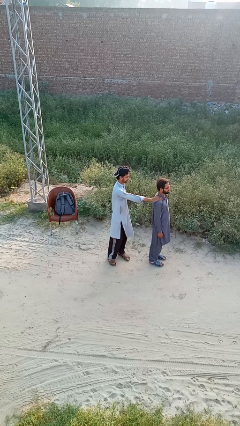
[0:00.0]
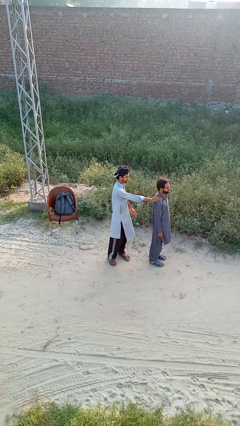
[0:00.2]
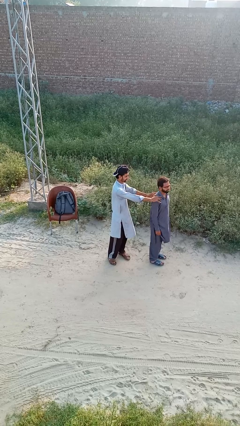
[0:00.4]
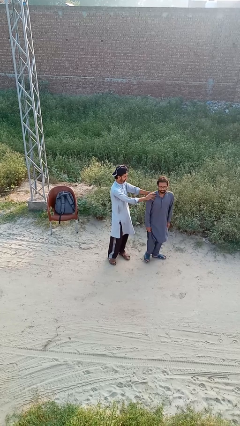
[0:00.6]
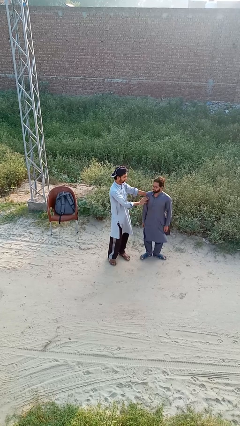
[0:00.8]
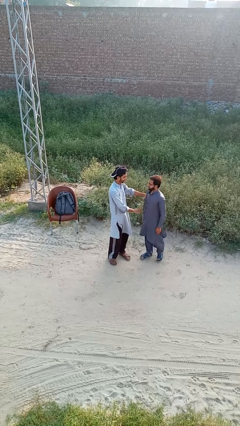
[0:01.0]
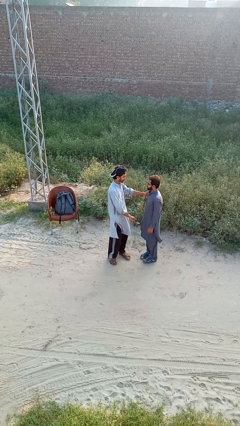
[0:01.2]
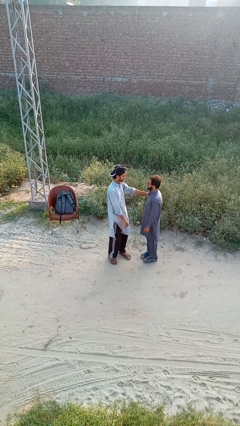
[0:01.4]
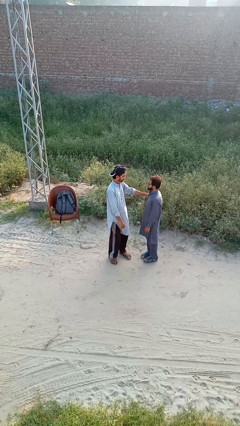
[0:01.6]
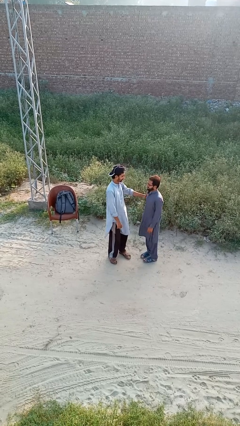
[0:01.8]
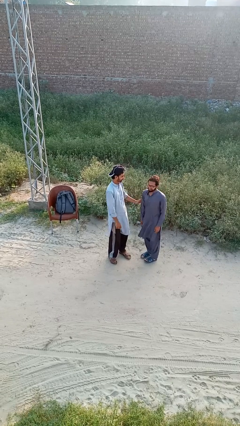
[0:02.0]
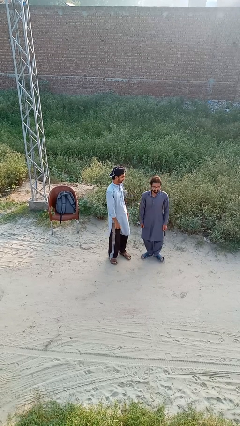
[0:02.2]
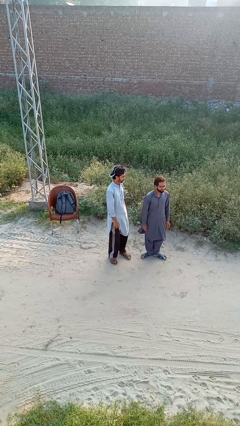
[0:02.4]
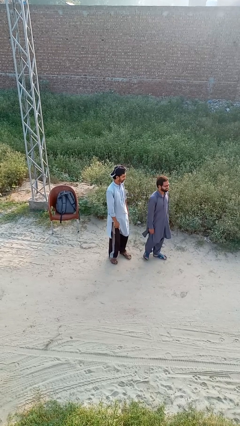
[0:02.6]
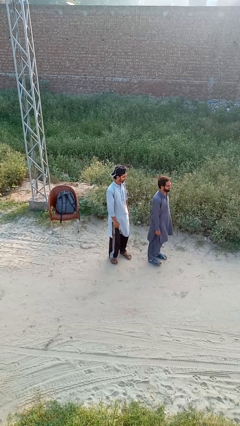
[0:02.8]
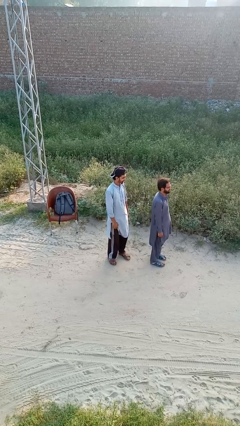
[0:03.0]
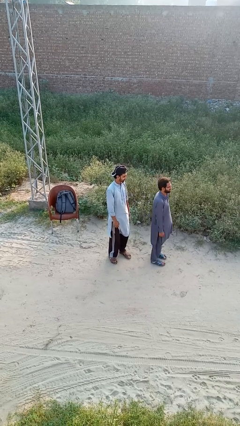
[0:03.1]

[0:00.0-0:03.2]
person spins person around

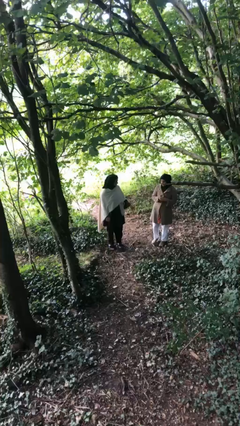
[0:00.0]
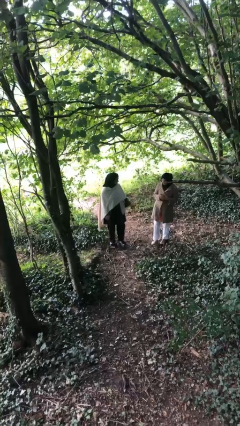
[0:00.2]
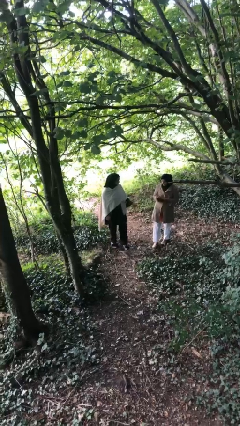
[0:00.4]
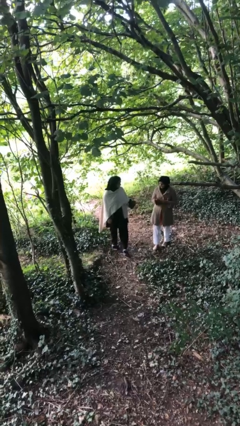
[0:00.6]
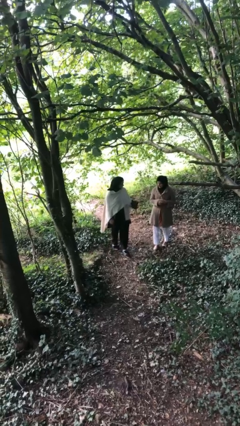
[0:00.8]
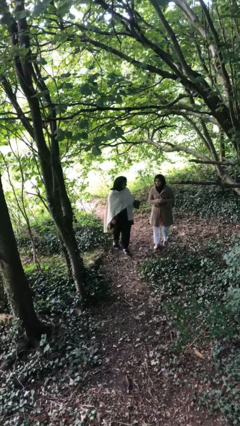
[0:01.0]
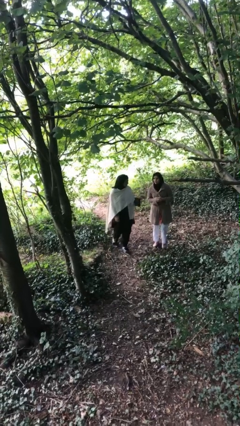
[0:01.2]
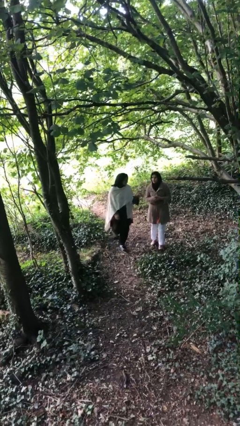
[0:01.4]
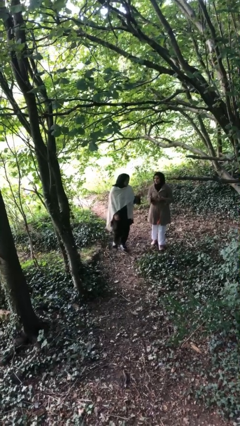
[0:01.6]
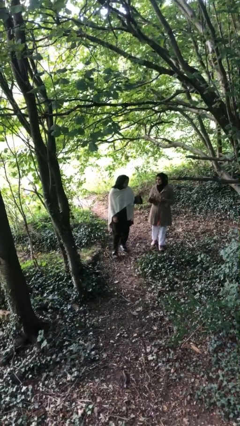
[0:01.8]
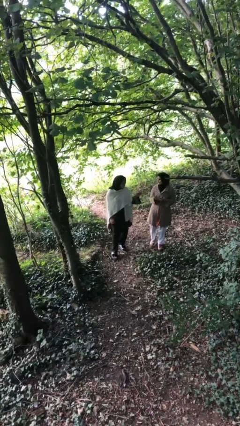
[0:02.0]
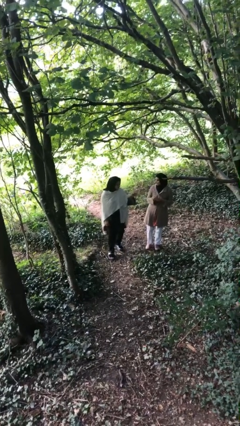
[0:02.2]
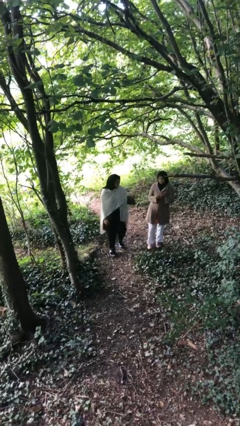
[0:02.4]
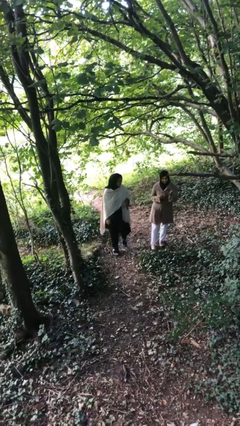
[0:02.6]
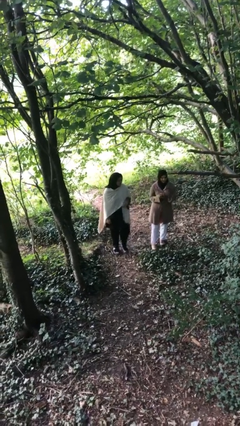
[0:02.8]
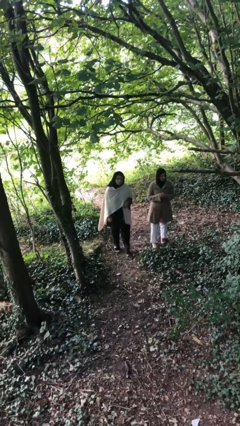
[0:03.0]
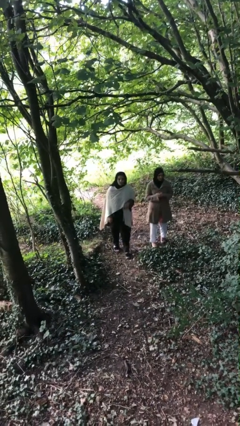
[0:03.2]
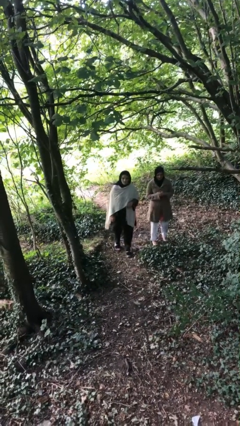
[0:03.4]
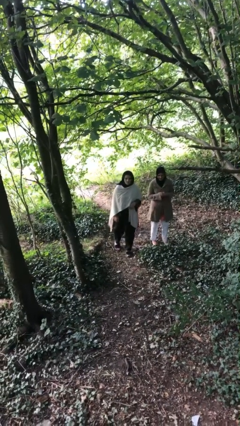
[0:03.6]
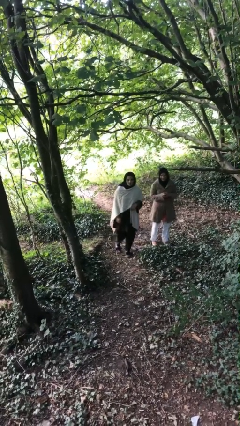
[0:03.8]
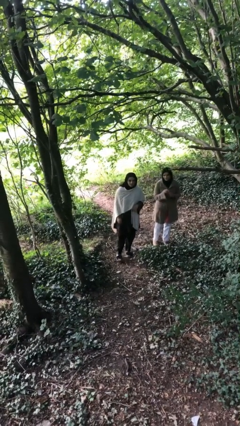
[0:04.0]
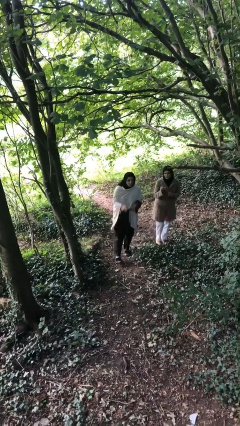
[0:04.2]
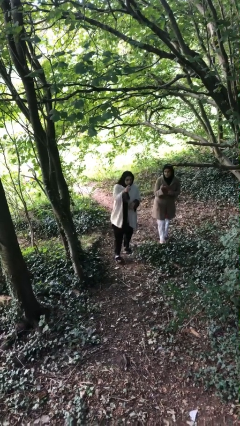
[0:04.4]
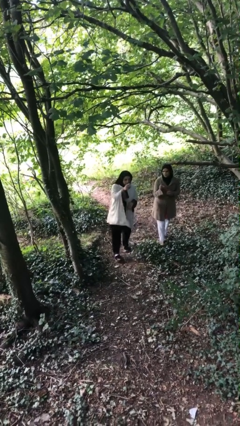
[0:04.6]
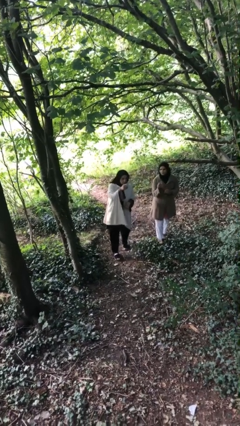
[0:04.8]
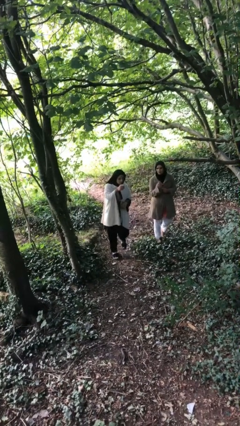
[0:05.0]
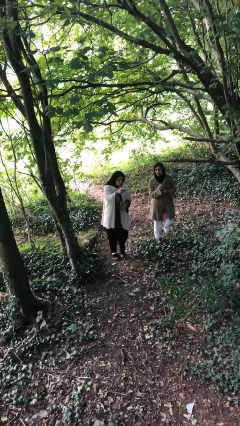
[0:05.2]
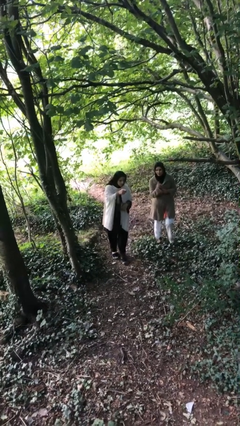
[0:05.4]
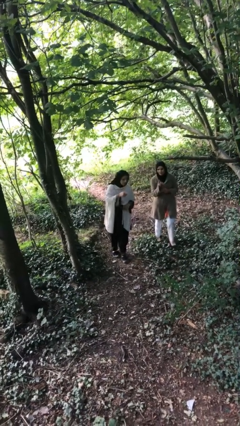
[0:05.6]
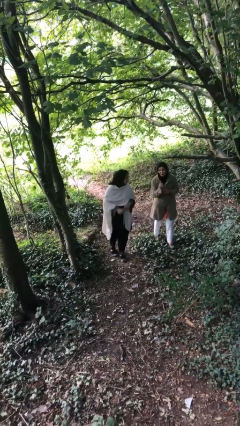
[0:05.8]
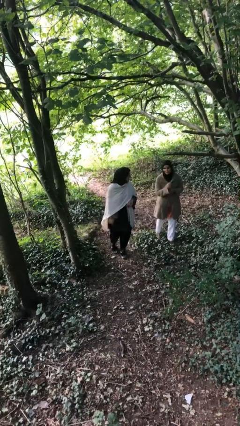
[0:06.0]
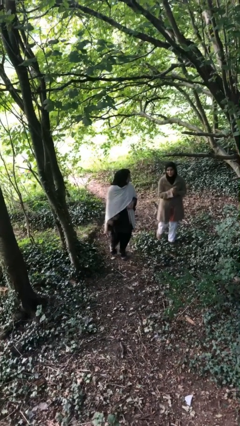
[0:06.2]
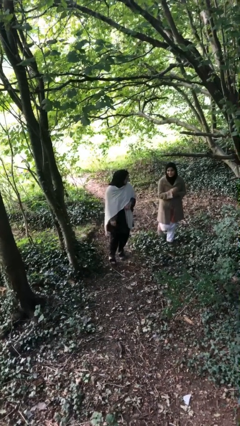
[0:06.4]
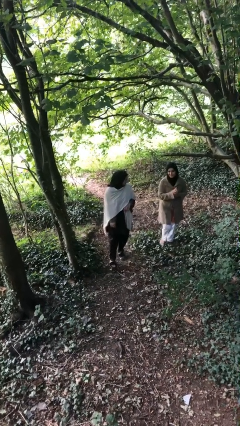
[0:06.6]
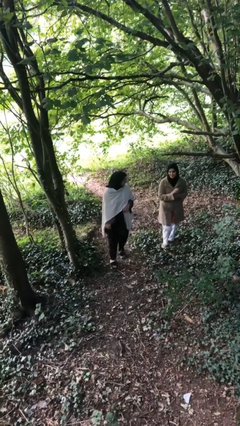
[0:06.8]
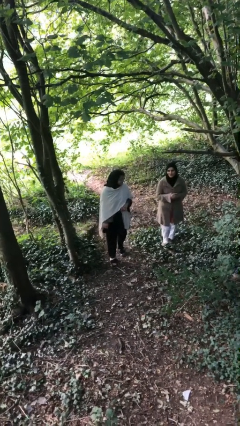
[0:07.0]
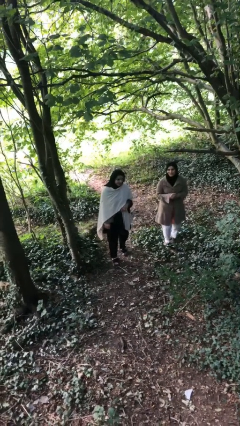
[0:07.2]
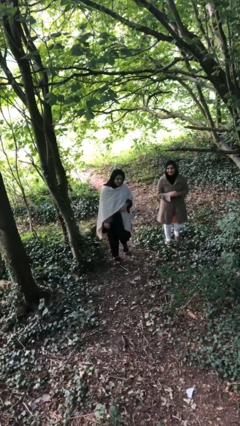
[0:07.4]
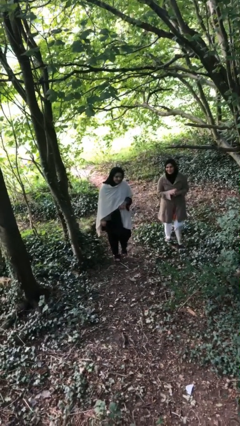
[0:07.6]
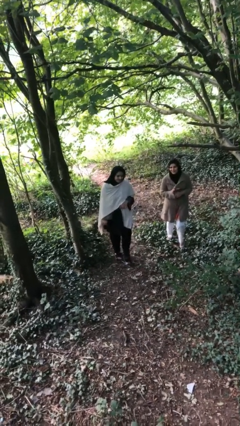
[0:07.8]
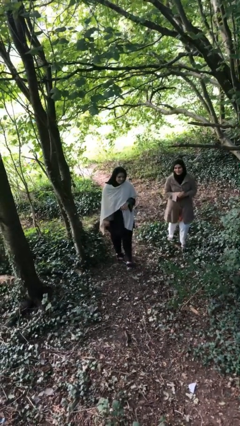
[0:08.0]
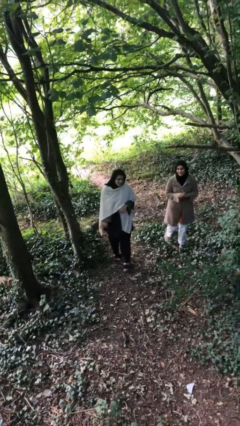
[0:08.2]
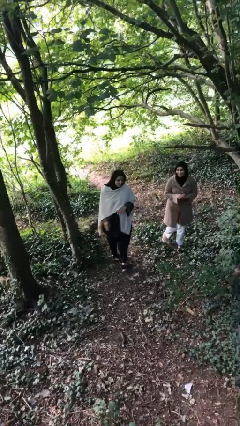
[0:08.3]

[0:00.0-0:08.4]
person talks to person

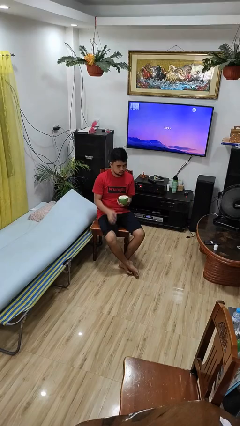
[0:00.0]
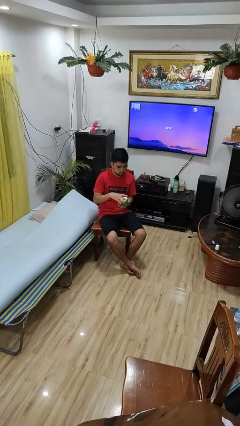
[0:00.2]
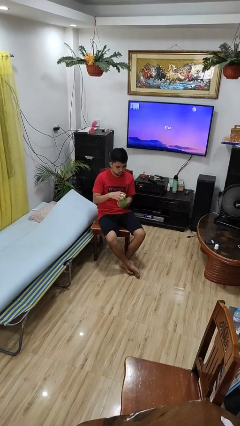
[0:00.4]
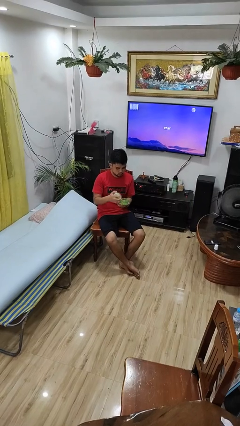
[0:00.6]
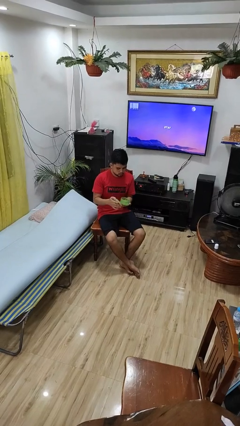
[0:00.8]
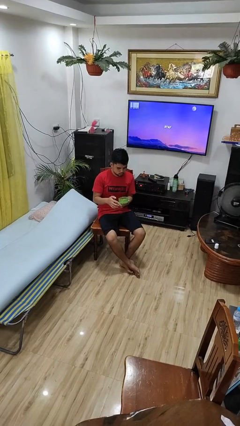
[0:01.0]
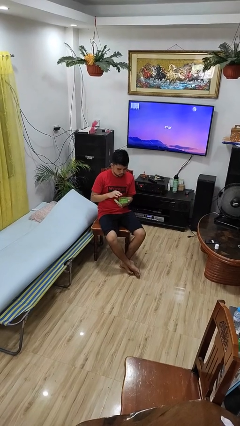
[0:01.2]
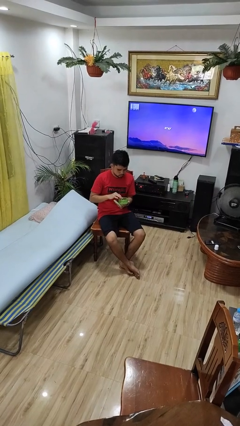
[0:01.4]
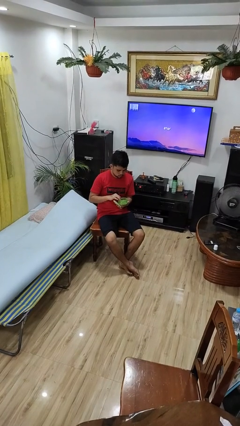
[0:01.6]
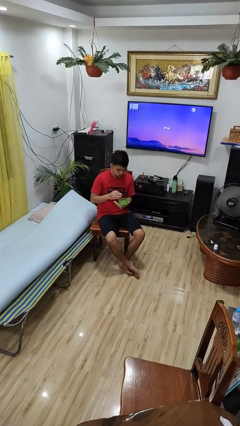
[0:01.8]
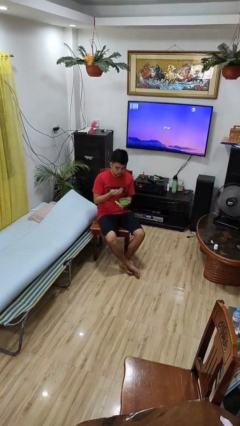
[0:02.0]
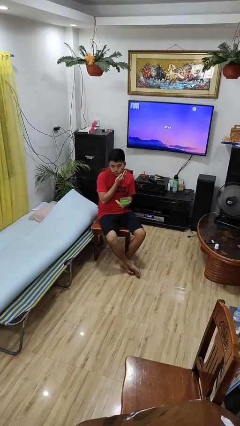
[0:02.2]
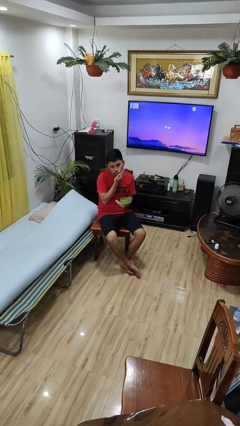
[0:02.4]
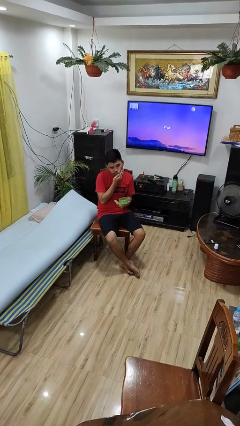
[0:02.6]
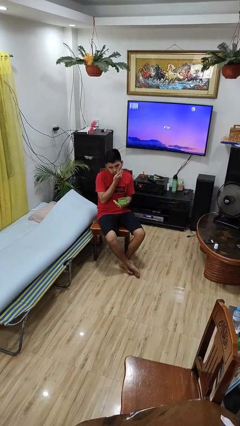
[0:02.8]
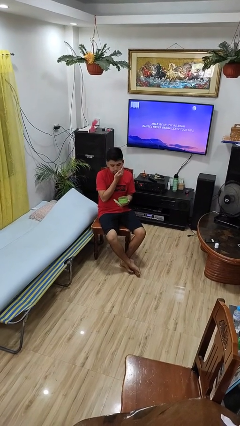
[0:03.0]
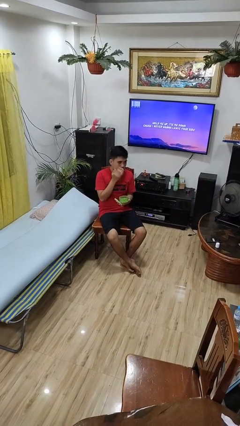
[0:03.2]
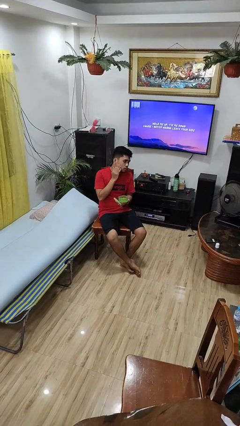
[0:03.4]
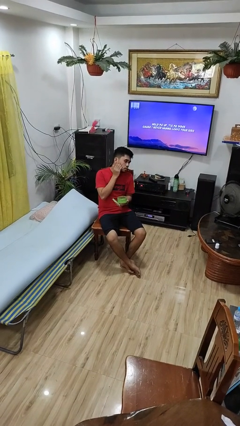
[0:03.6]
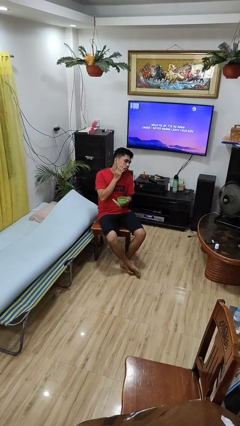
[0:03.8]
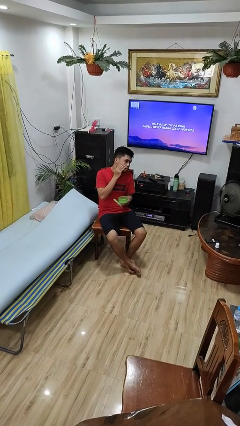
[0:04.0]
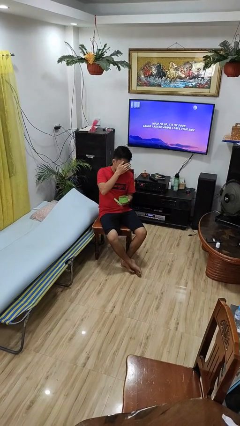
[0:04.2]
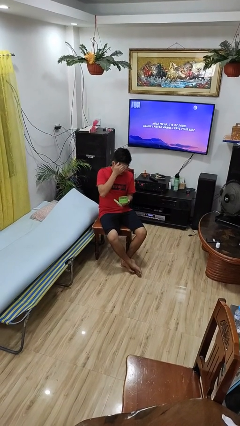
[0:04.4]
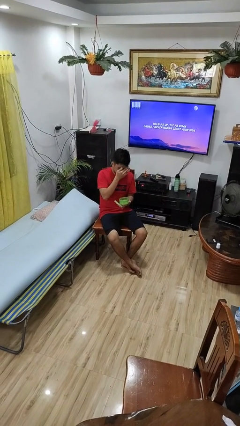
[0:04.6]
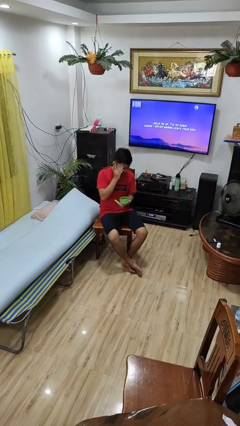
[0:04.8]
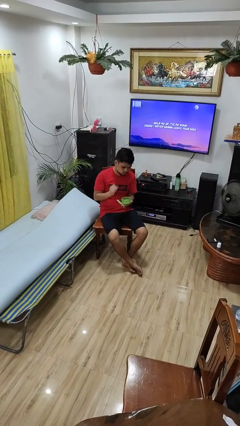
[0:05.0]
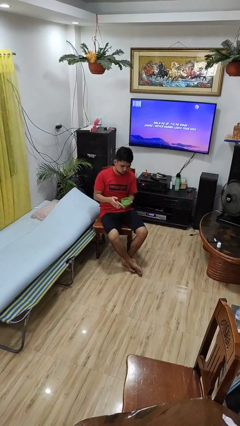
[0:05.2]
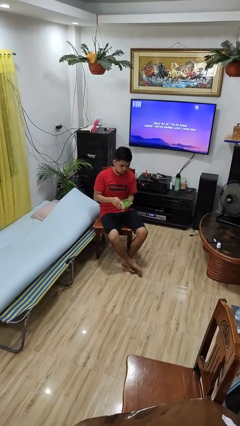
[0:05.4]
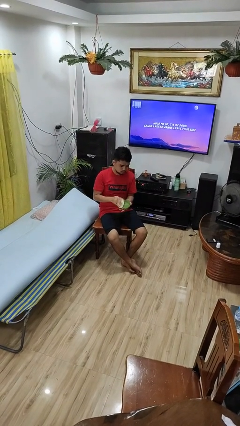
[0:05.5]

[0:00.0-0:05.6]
person applies facial moisturizer

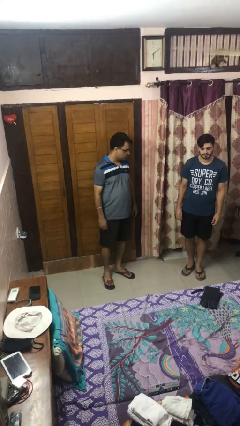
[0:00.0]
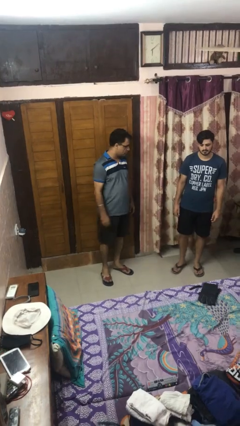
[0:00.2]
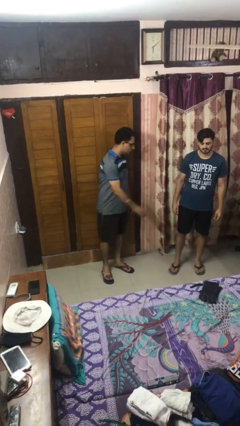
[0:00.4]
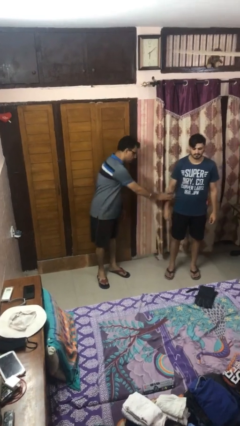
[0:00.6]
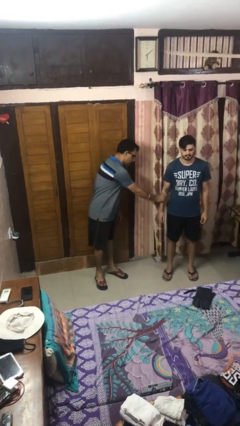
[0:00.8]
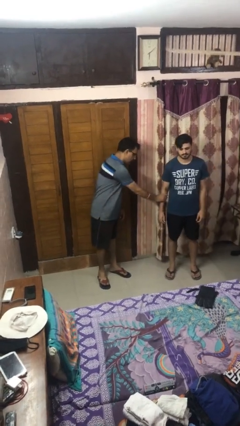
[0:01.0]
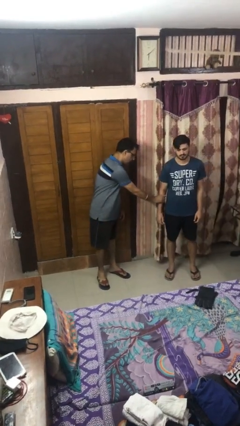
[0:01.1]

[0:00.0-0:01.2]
person grabs person by forearm
